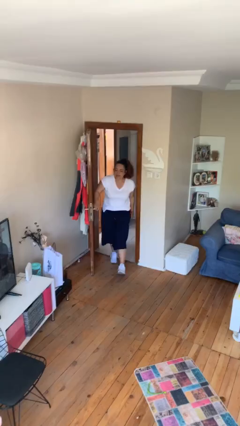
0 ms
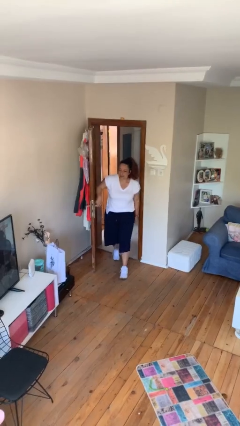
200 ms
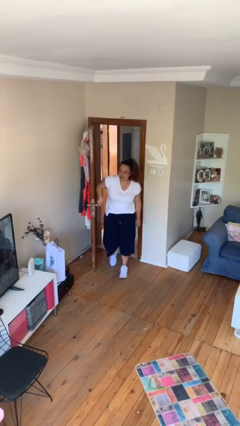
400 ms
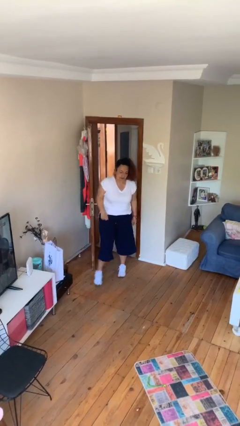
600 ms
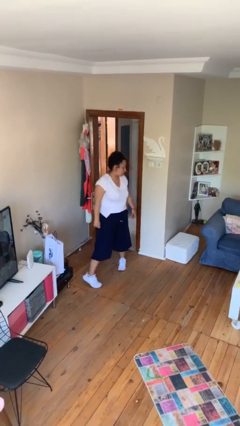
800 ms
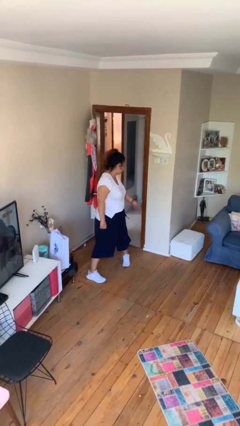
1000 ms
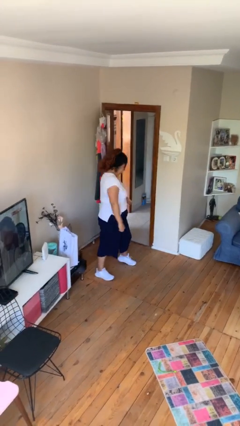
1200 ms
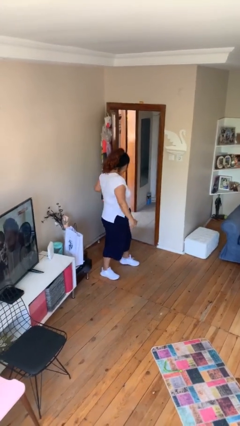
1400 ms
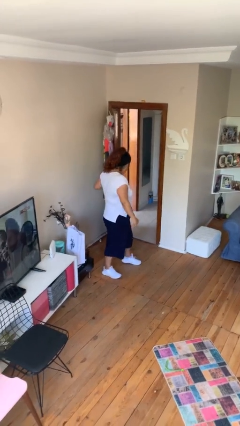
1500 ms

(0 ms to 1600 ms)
person enters scene through structure

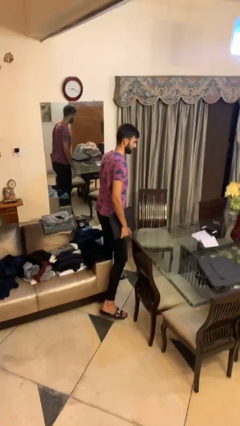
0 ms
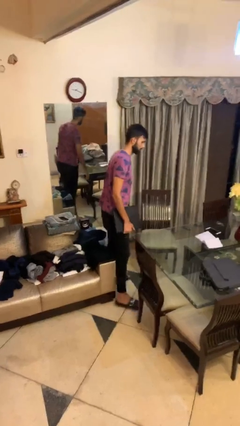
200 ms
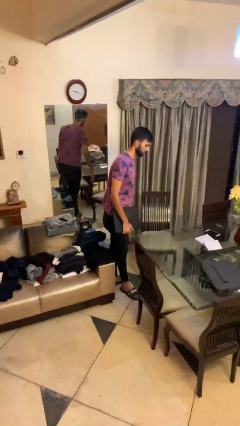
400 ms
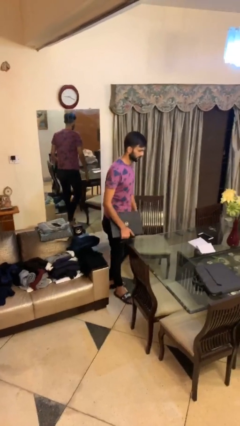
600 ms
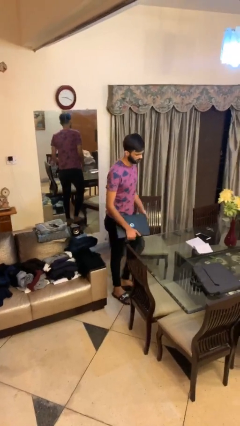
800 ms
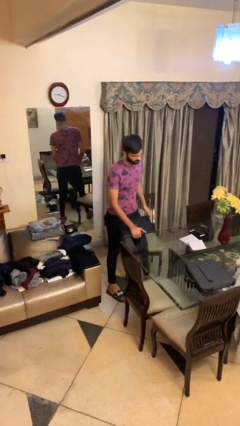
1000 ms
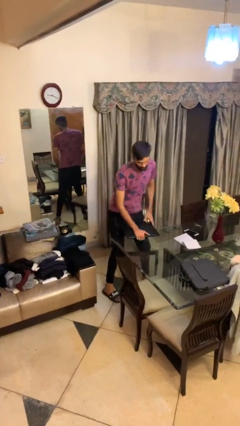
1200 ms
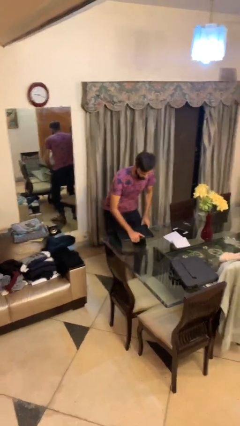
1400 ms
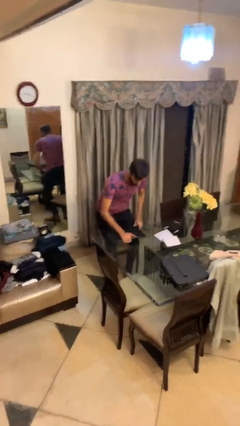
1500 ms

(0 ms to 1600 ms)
person sits down

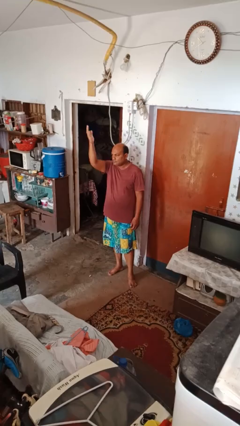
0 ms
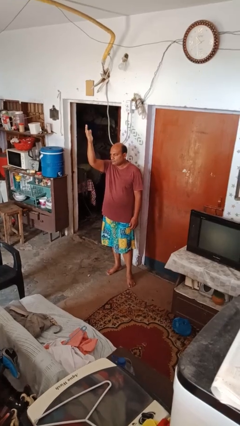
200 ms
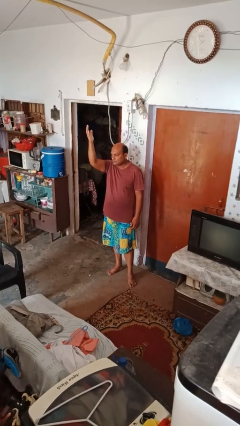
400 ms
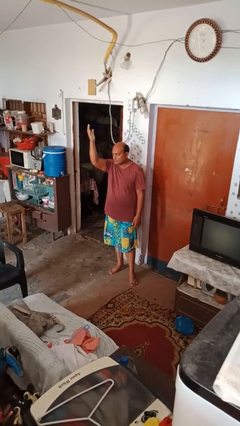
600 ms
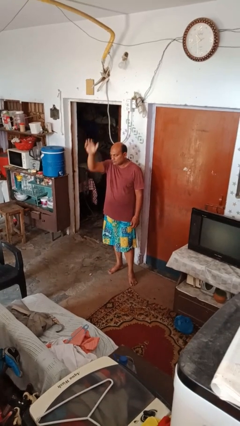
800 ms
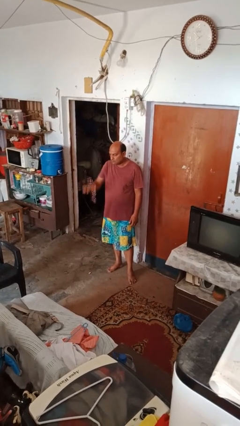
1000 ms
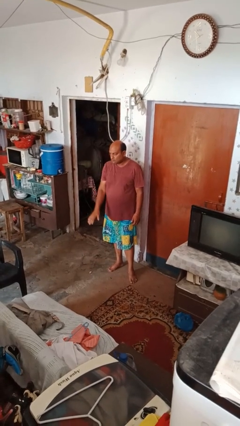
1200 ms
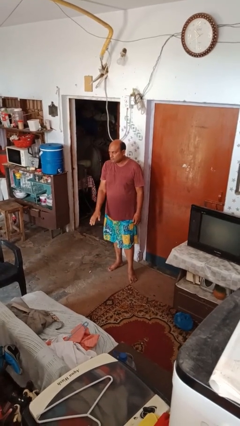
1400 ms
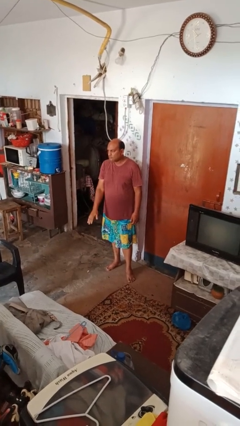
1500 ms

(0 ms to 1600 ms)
person gestures lower hand

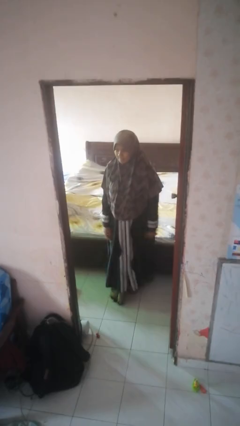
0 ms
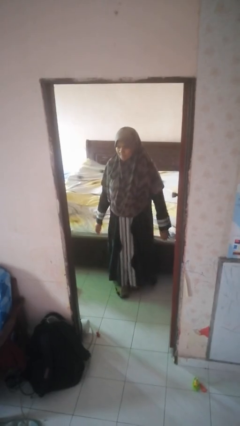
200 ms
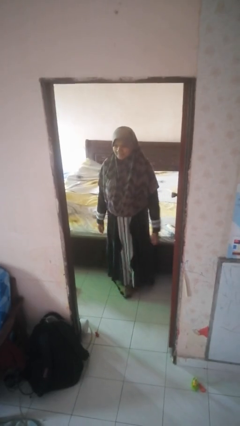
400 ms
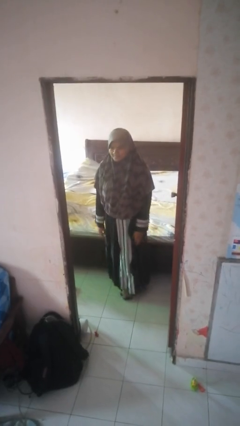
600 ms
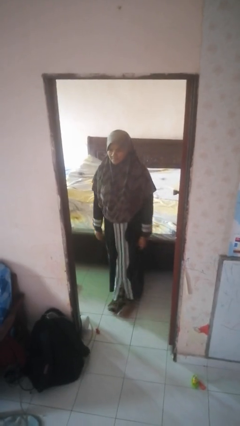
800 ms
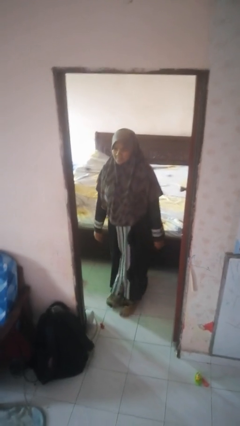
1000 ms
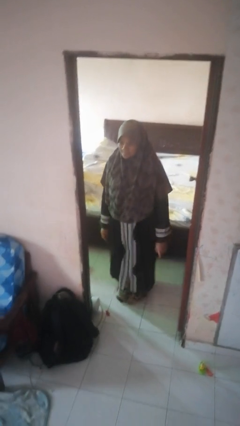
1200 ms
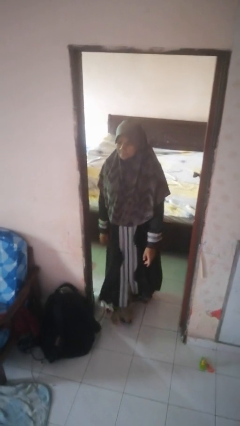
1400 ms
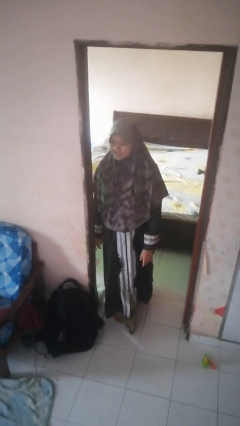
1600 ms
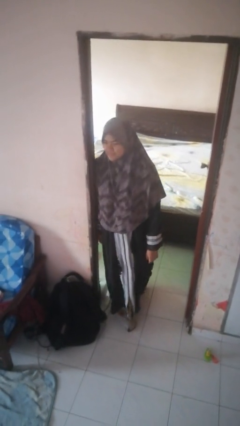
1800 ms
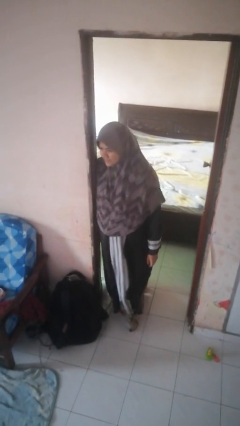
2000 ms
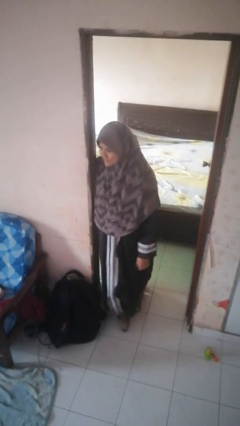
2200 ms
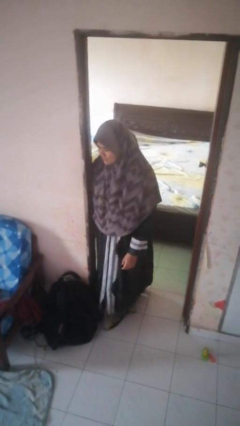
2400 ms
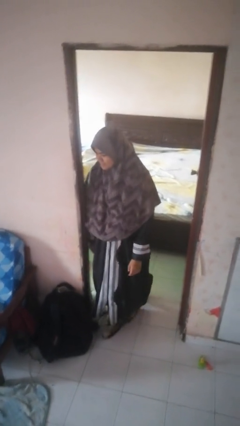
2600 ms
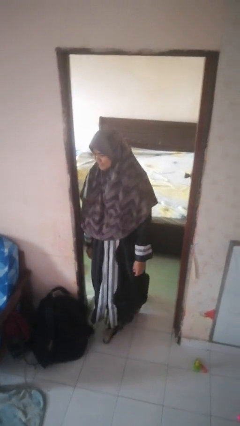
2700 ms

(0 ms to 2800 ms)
person bumps into wall

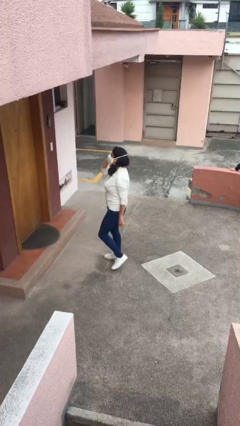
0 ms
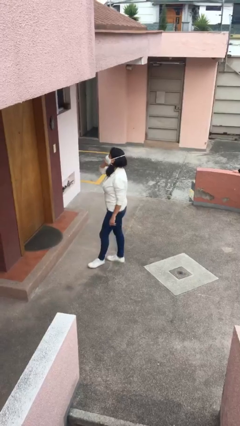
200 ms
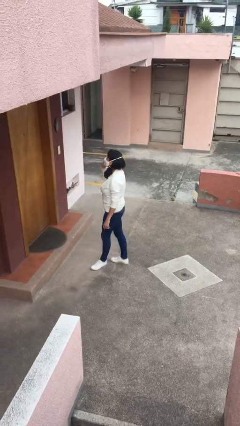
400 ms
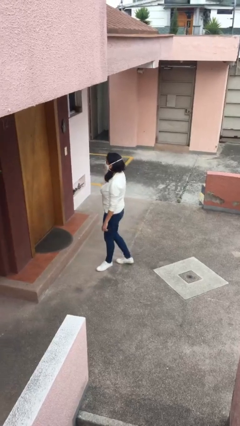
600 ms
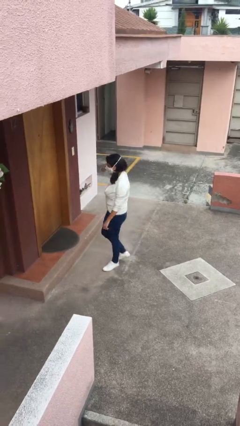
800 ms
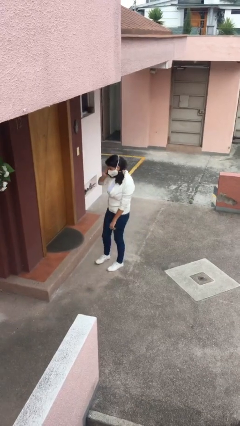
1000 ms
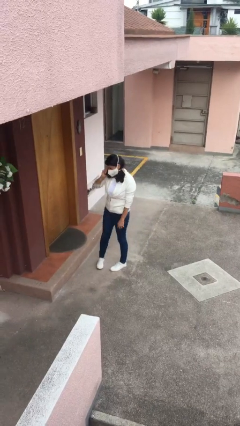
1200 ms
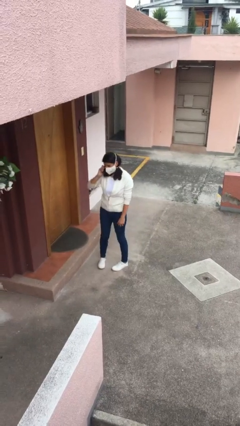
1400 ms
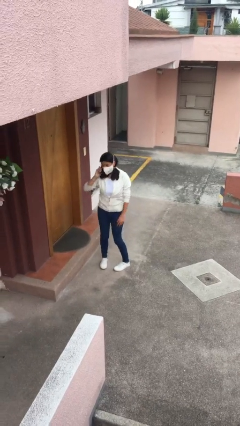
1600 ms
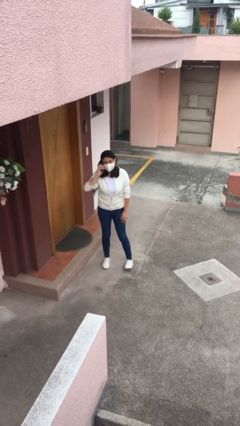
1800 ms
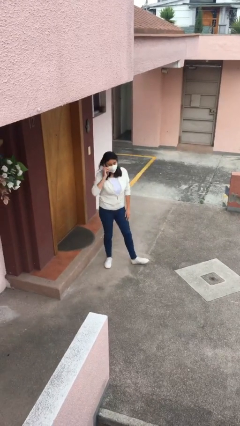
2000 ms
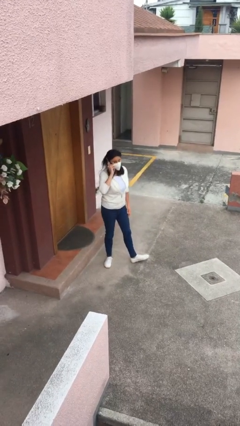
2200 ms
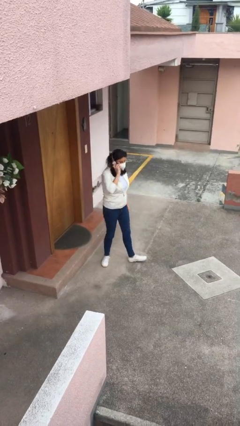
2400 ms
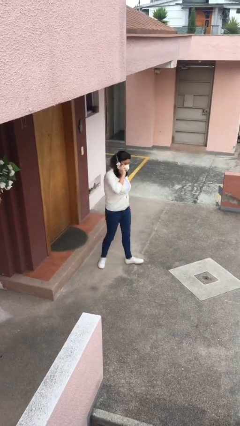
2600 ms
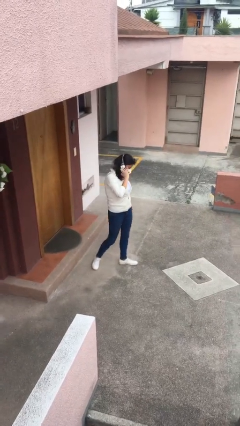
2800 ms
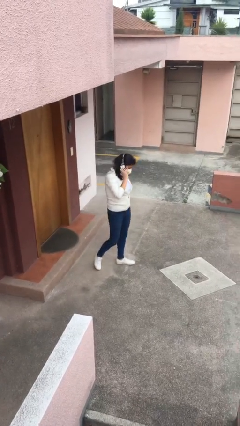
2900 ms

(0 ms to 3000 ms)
person talks on phone

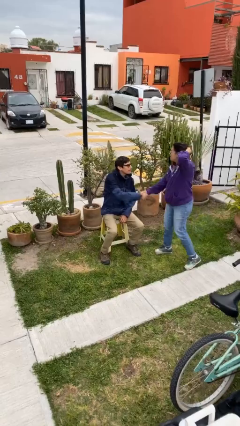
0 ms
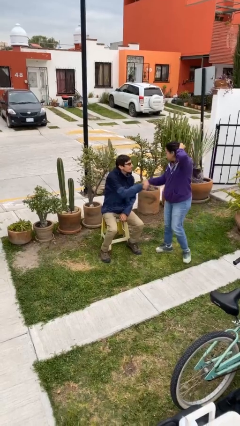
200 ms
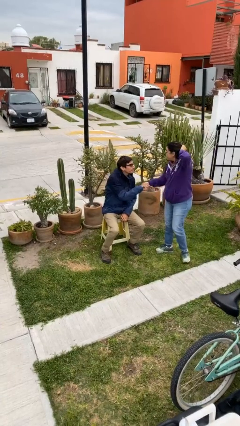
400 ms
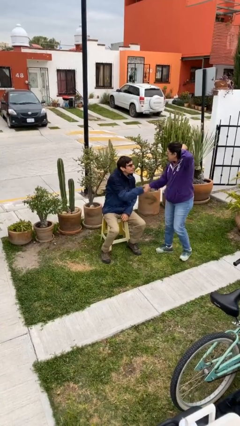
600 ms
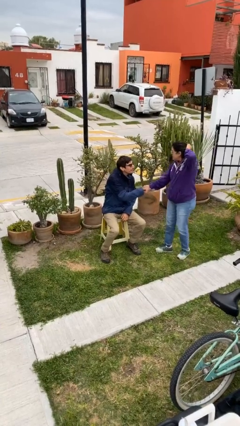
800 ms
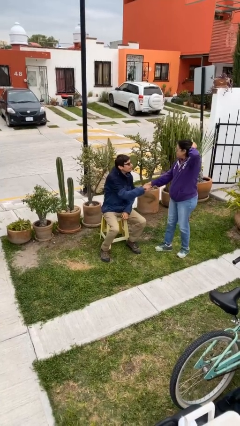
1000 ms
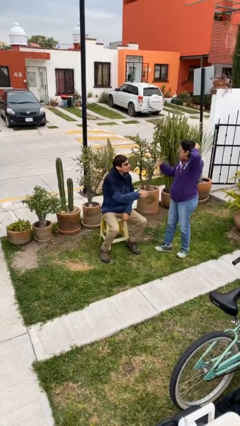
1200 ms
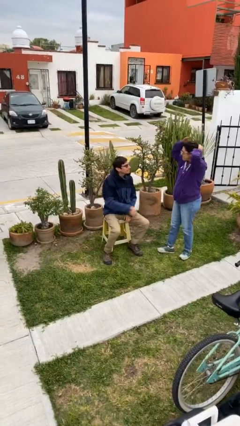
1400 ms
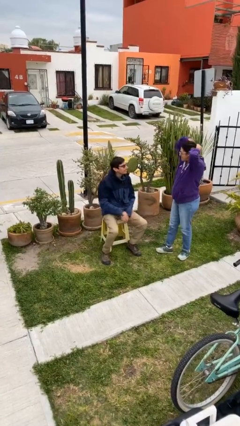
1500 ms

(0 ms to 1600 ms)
person shakes hand

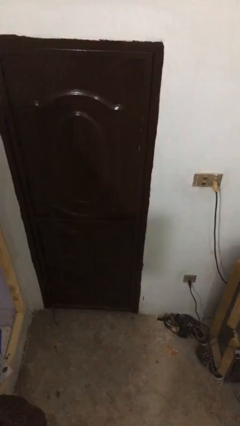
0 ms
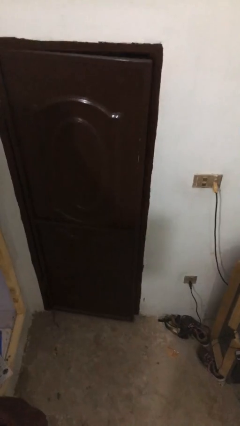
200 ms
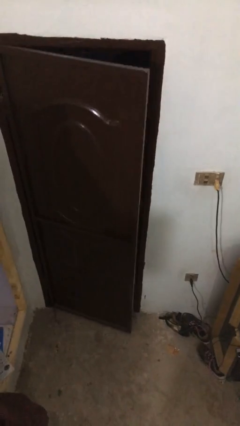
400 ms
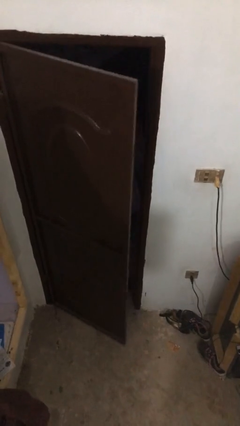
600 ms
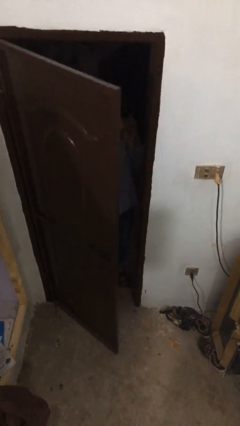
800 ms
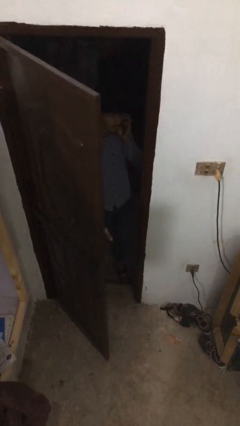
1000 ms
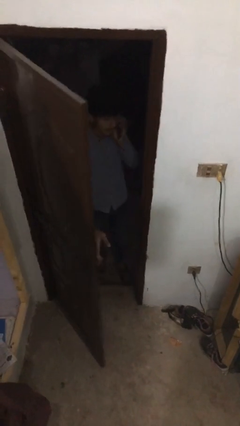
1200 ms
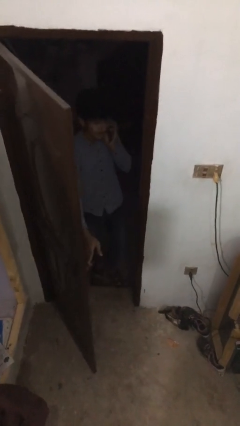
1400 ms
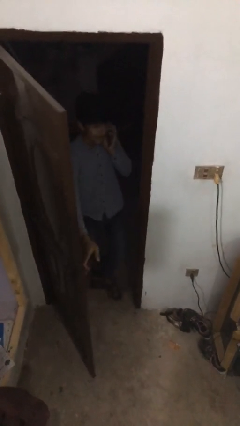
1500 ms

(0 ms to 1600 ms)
person opens facility door

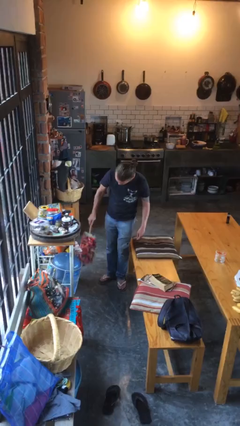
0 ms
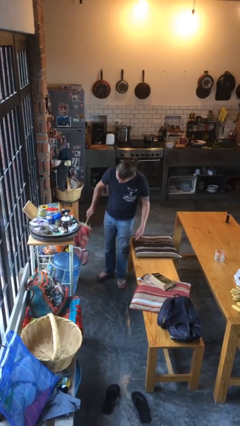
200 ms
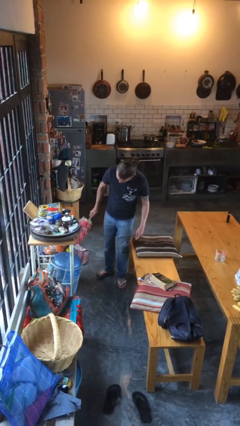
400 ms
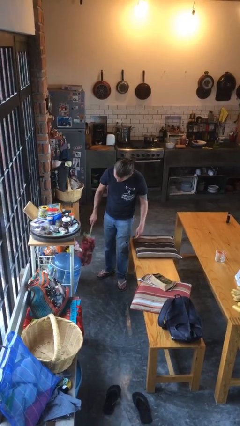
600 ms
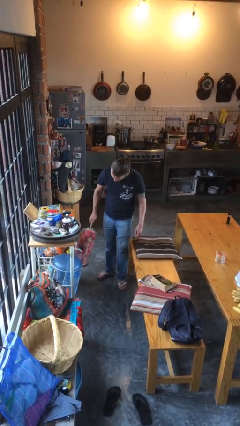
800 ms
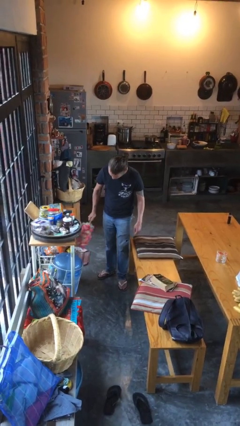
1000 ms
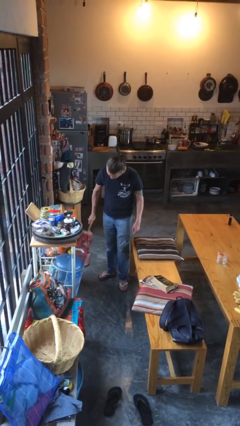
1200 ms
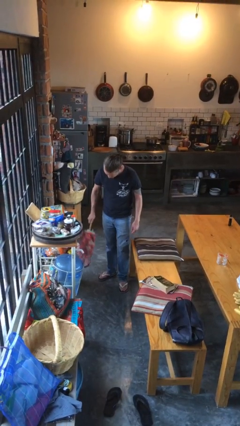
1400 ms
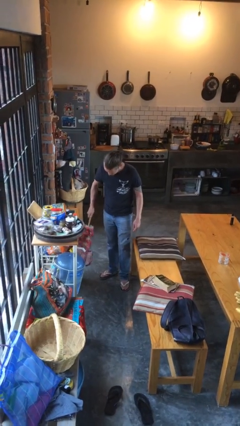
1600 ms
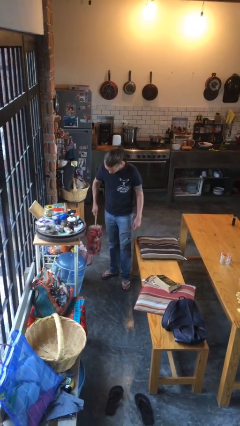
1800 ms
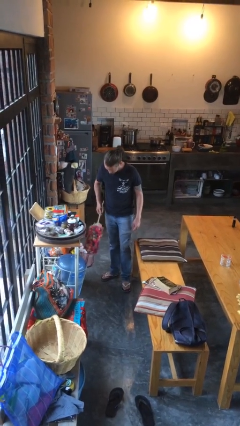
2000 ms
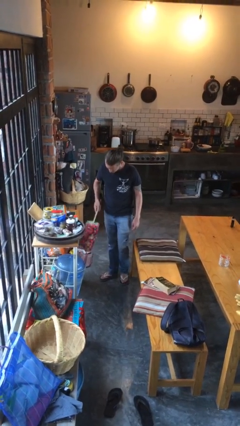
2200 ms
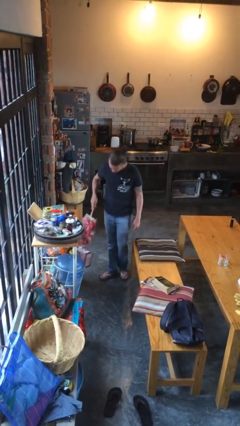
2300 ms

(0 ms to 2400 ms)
person dusts furniture

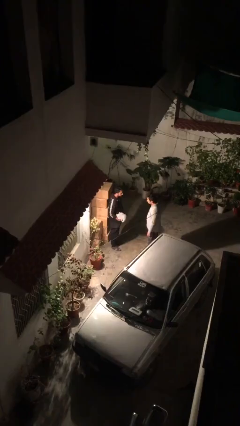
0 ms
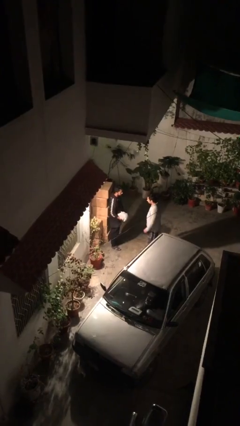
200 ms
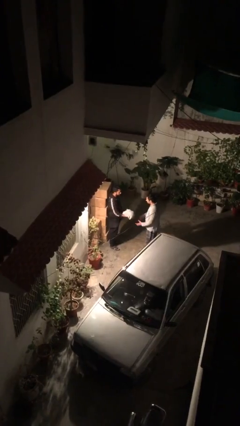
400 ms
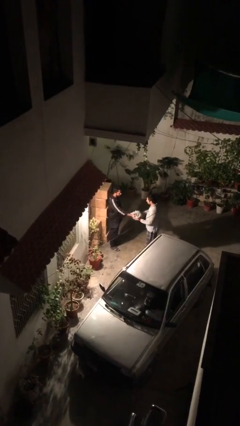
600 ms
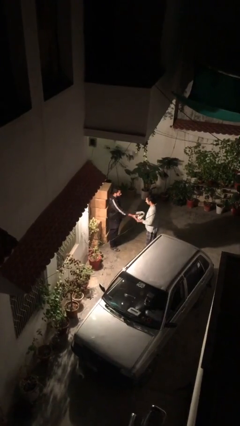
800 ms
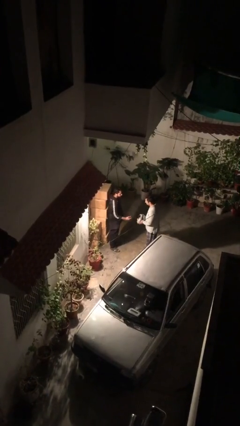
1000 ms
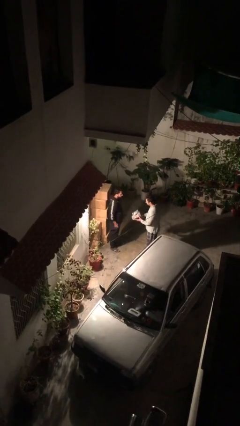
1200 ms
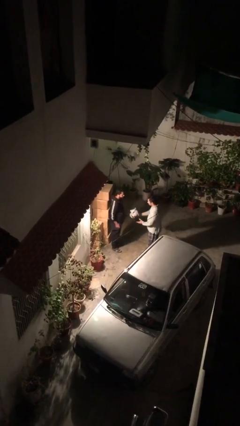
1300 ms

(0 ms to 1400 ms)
person transfers object to person
